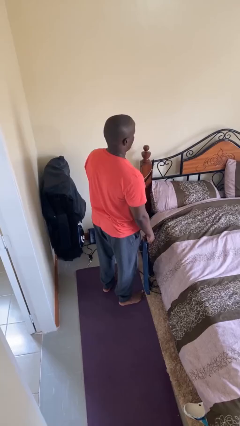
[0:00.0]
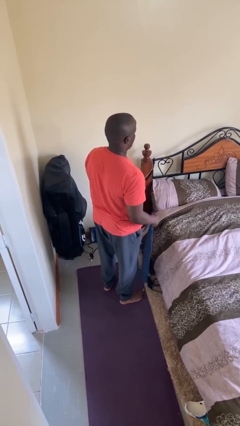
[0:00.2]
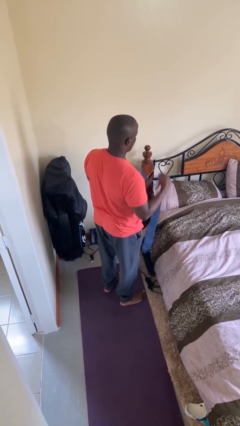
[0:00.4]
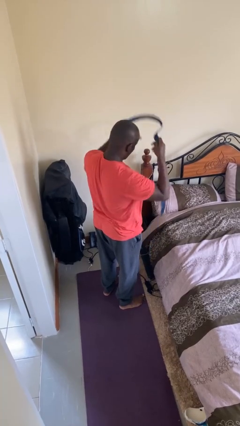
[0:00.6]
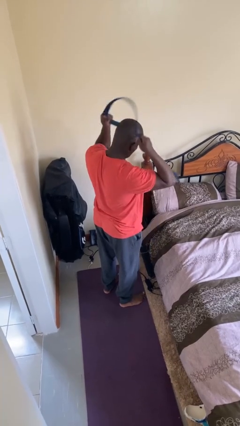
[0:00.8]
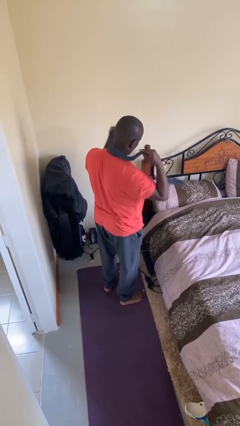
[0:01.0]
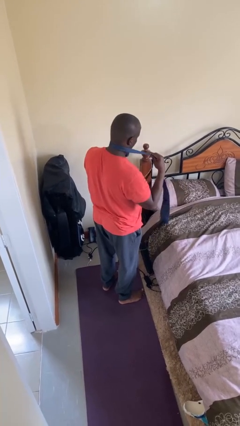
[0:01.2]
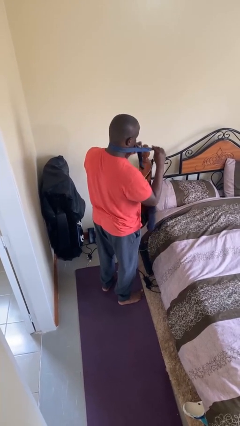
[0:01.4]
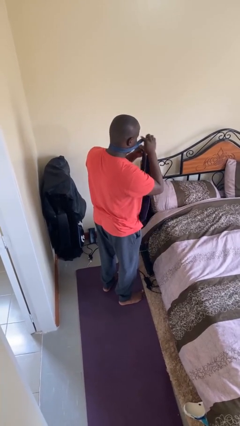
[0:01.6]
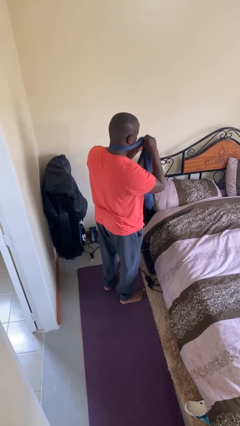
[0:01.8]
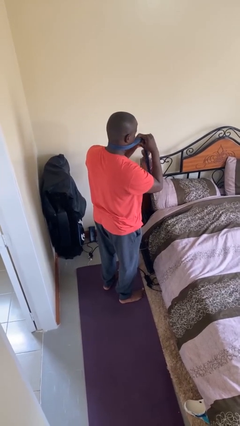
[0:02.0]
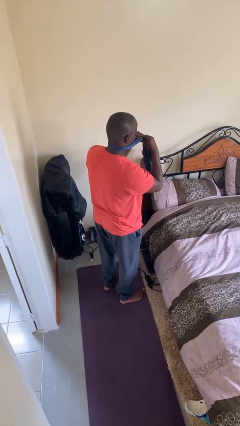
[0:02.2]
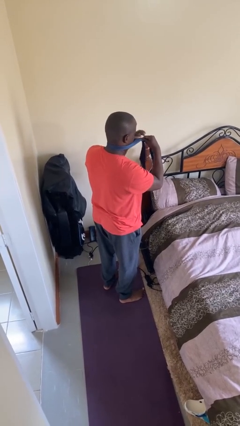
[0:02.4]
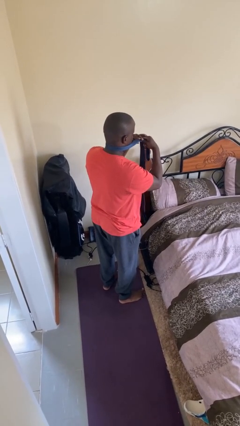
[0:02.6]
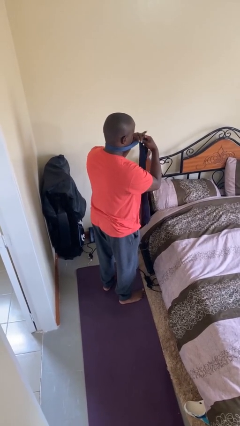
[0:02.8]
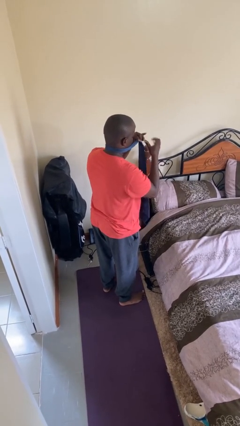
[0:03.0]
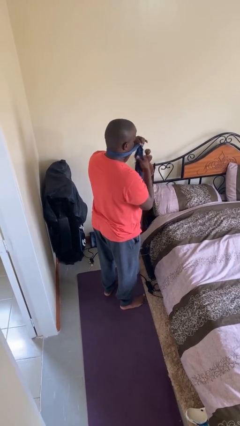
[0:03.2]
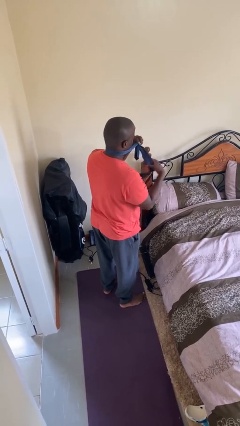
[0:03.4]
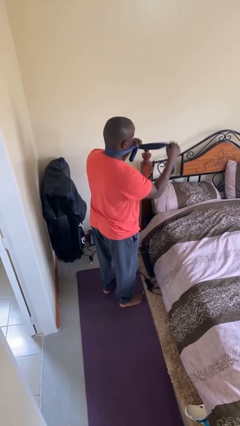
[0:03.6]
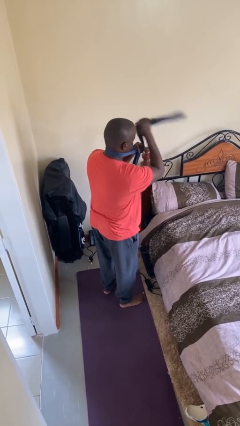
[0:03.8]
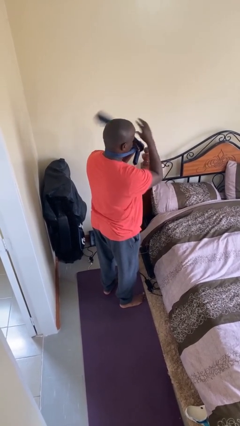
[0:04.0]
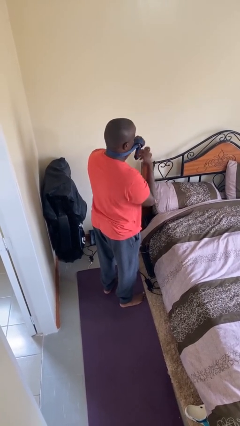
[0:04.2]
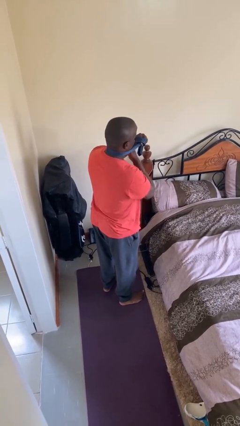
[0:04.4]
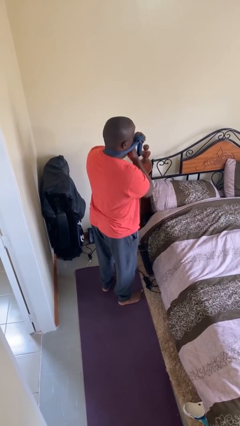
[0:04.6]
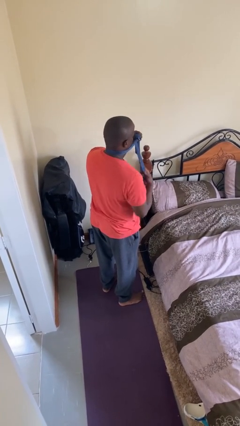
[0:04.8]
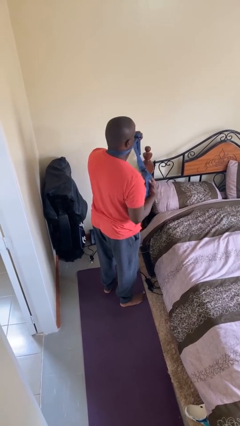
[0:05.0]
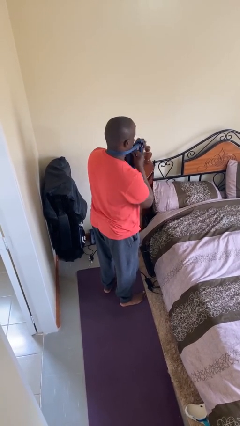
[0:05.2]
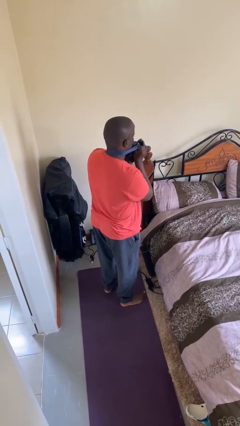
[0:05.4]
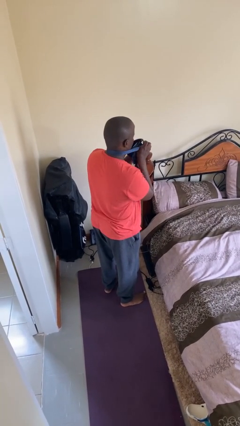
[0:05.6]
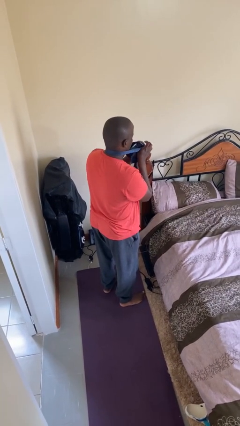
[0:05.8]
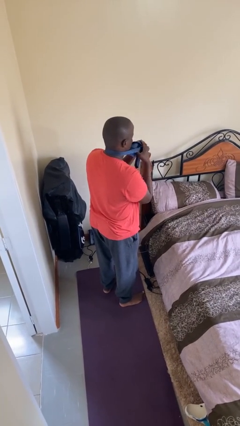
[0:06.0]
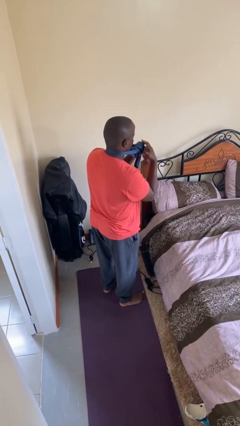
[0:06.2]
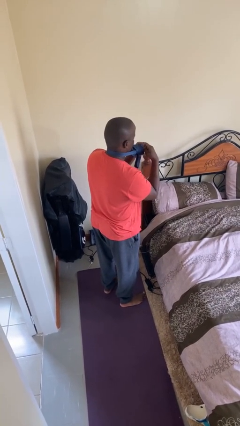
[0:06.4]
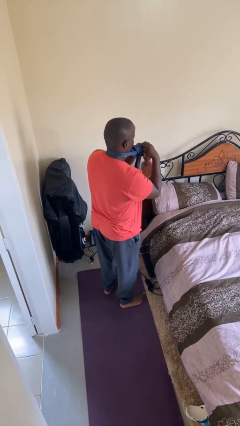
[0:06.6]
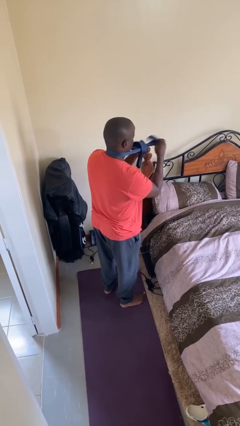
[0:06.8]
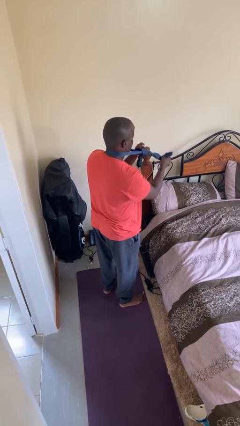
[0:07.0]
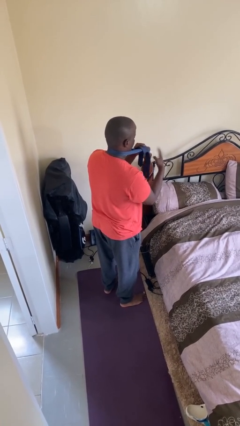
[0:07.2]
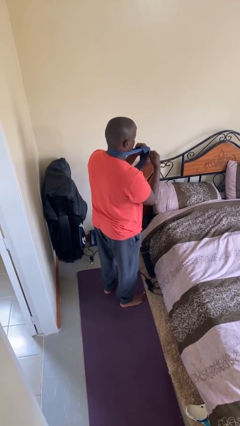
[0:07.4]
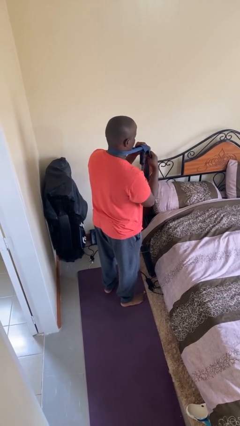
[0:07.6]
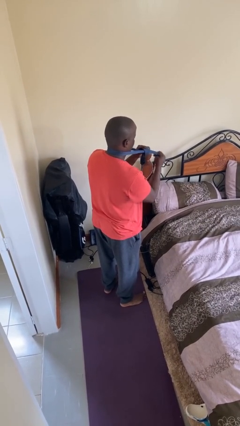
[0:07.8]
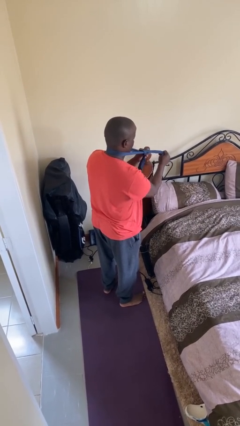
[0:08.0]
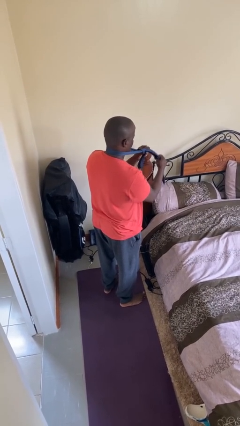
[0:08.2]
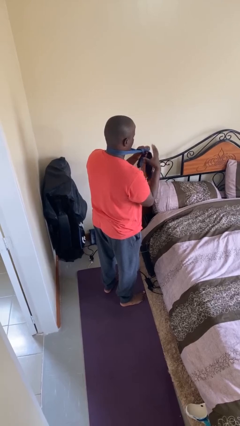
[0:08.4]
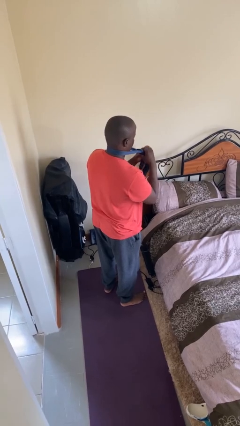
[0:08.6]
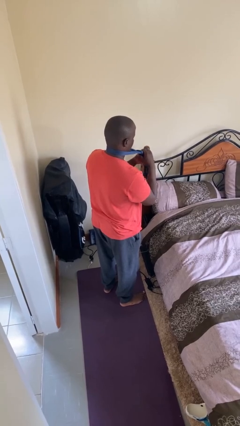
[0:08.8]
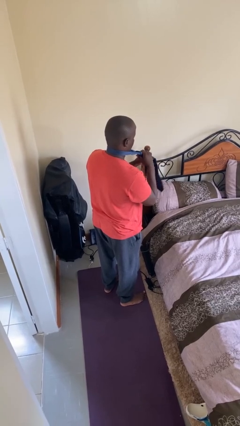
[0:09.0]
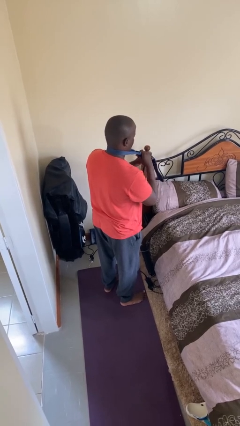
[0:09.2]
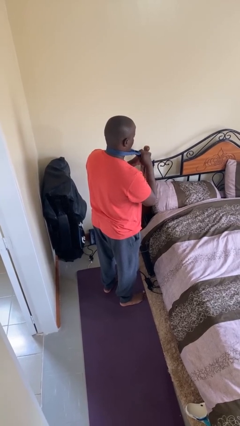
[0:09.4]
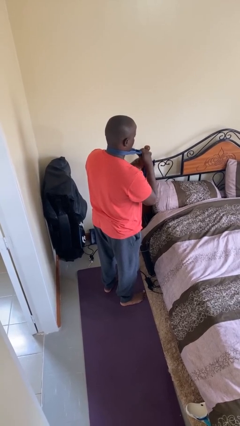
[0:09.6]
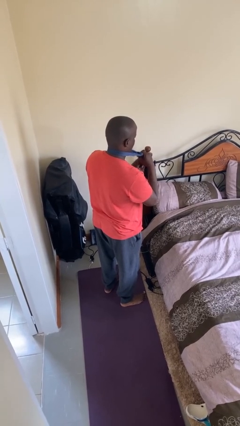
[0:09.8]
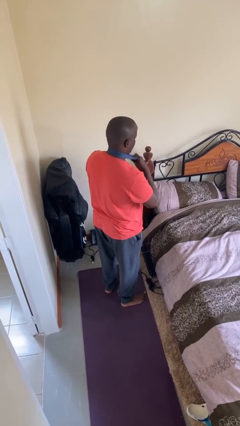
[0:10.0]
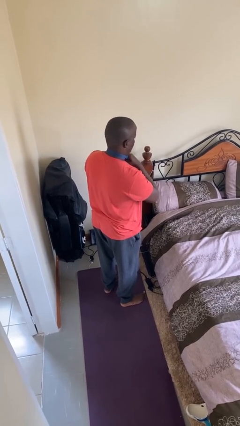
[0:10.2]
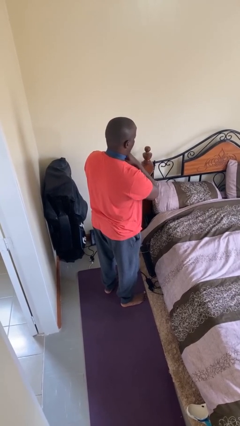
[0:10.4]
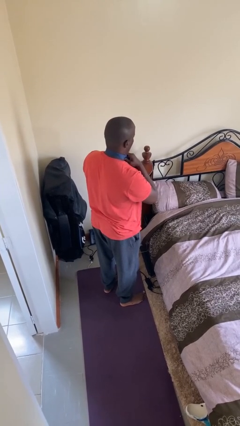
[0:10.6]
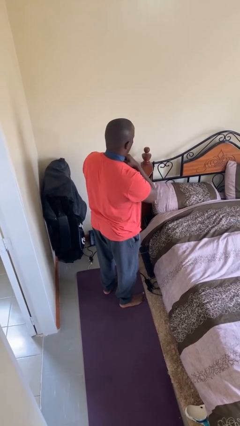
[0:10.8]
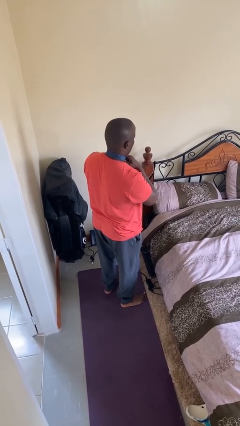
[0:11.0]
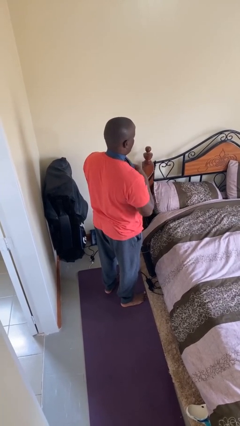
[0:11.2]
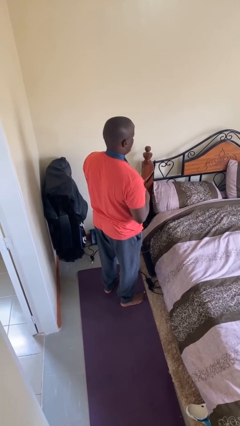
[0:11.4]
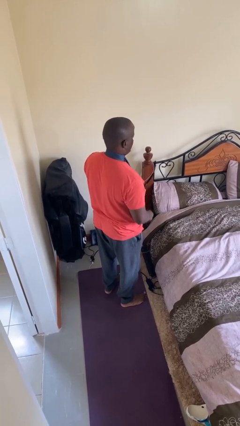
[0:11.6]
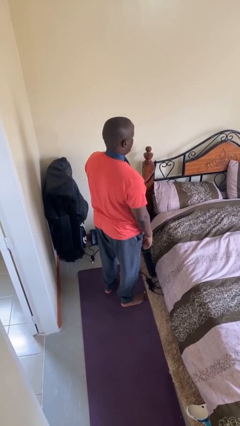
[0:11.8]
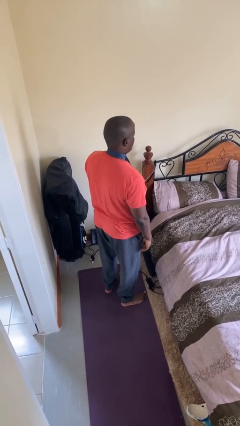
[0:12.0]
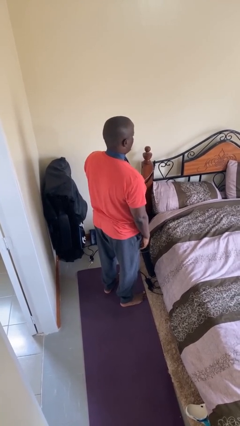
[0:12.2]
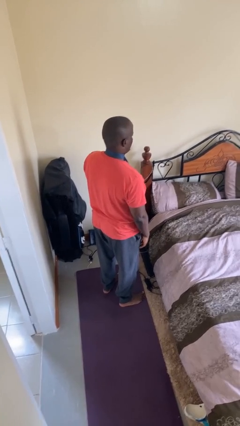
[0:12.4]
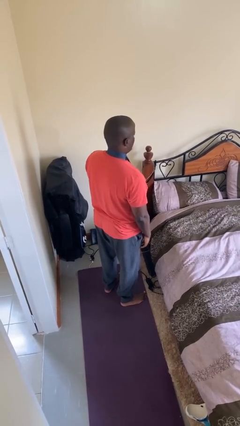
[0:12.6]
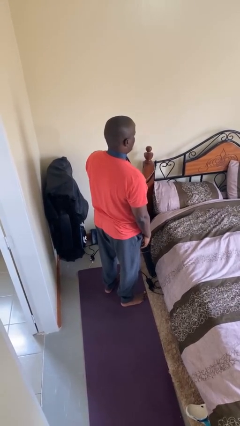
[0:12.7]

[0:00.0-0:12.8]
person puts on necktie

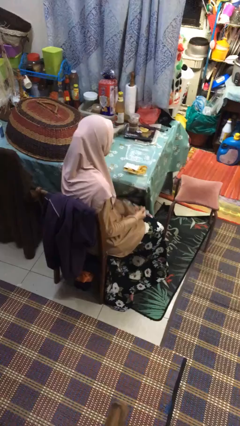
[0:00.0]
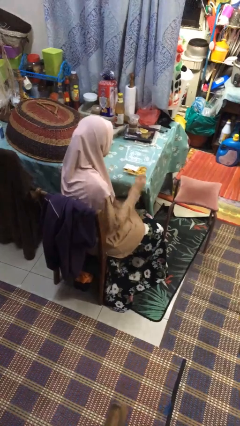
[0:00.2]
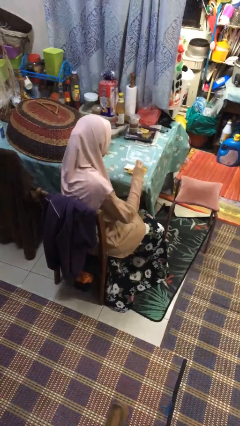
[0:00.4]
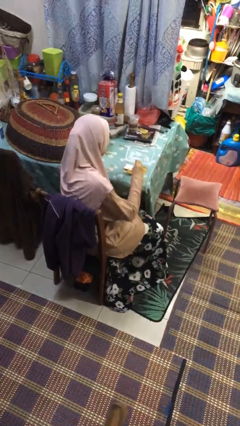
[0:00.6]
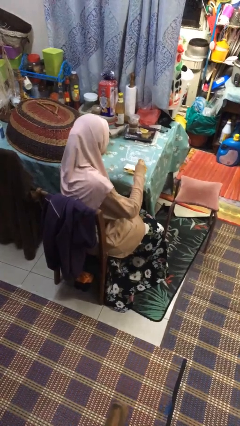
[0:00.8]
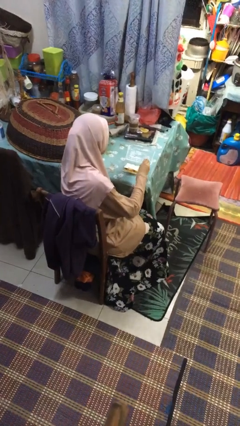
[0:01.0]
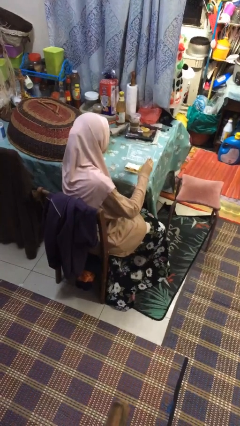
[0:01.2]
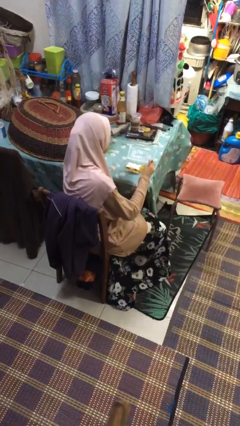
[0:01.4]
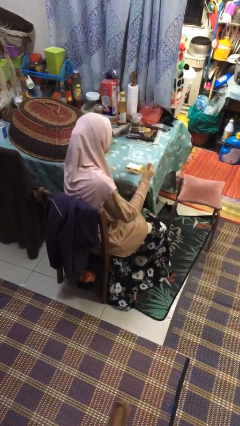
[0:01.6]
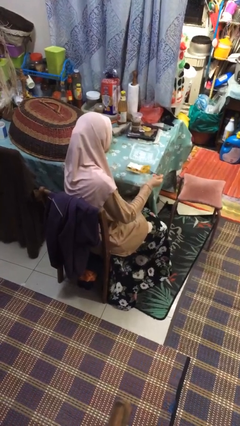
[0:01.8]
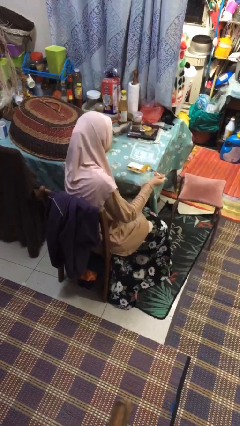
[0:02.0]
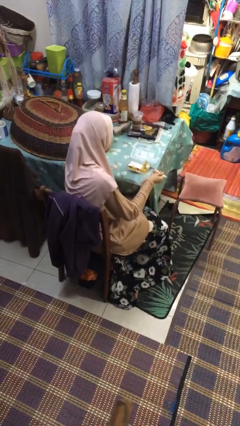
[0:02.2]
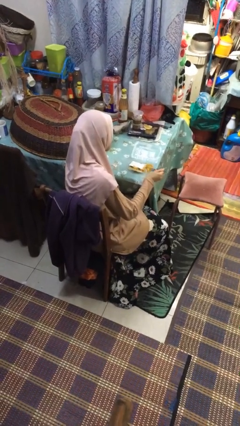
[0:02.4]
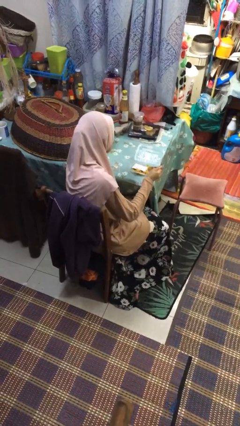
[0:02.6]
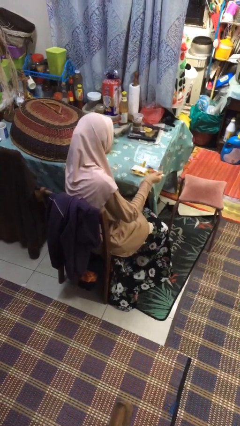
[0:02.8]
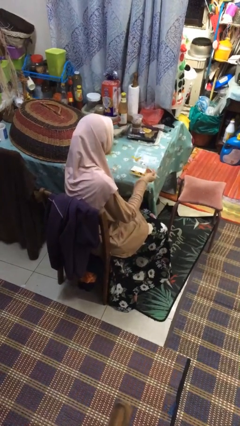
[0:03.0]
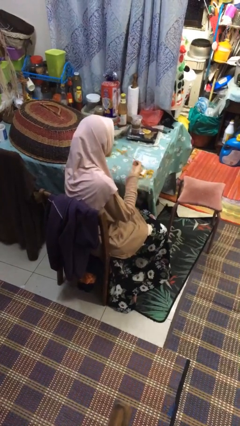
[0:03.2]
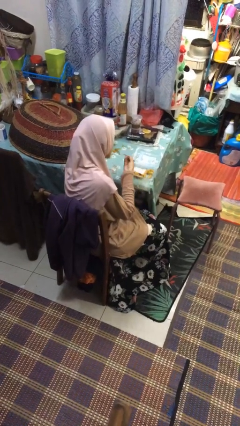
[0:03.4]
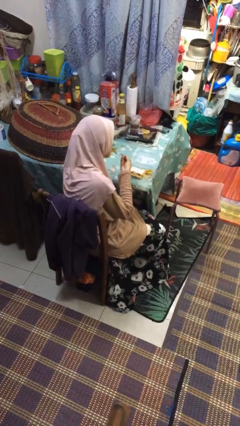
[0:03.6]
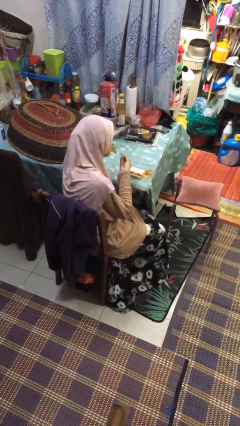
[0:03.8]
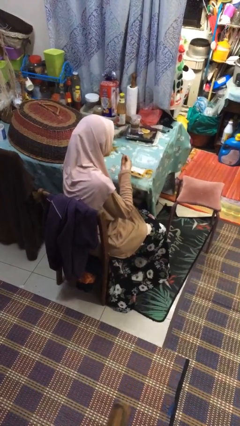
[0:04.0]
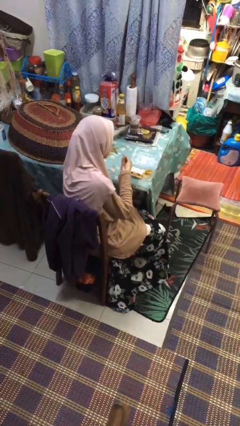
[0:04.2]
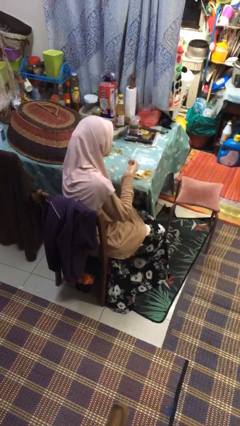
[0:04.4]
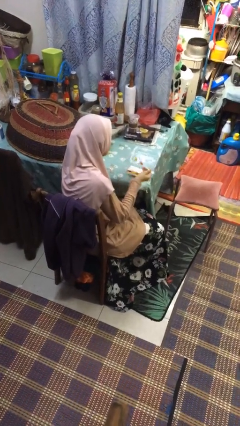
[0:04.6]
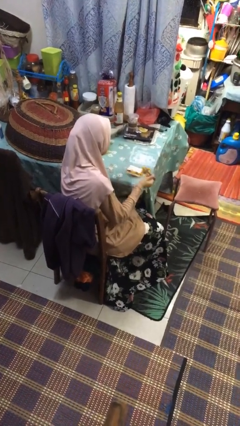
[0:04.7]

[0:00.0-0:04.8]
person eats with utensil

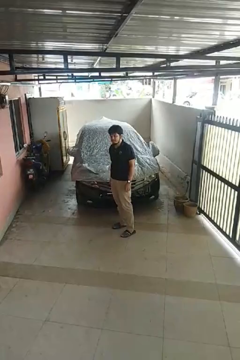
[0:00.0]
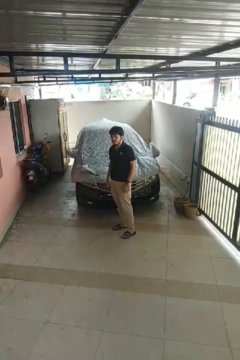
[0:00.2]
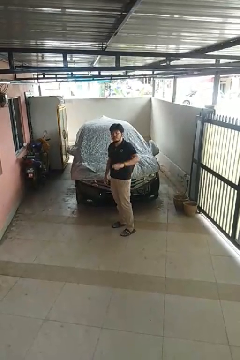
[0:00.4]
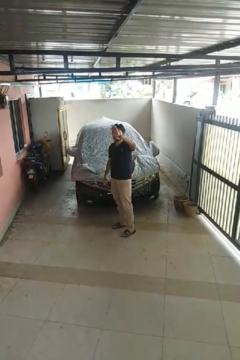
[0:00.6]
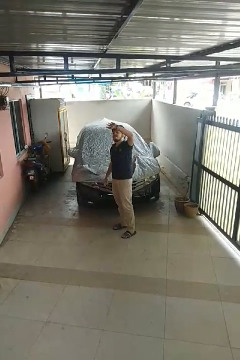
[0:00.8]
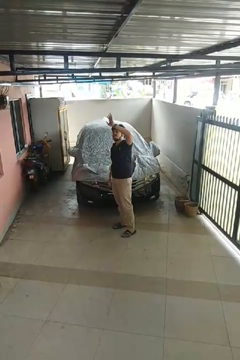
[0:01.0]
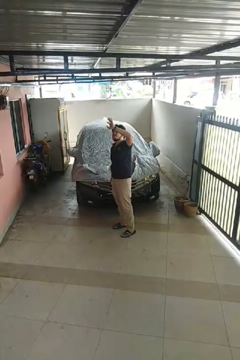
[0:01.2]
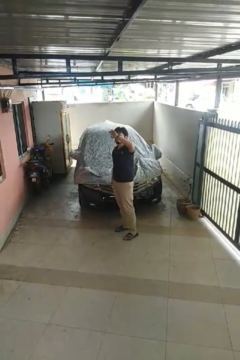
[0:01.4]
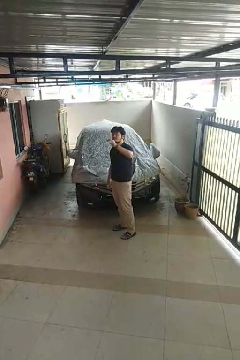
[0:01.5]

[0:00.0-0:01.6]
person waves at person
